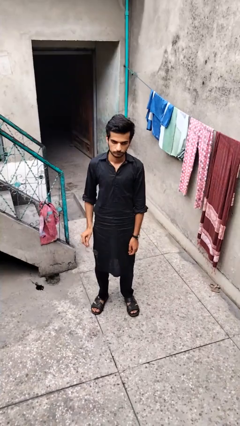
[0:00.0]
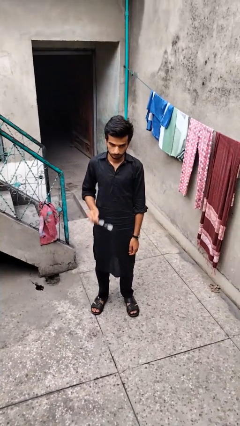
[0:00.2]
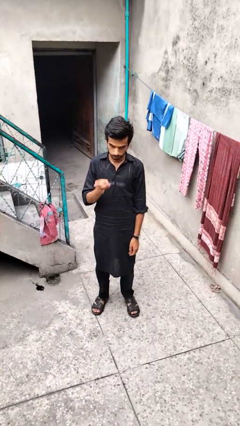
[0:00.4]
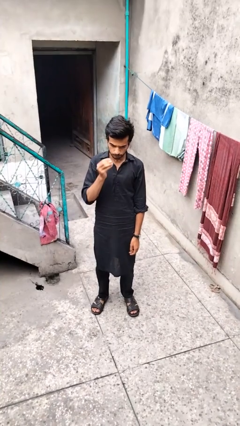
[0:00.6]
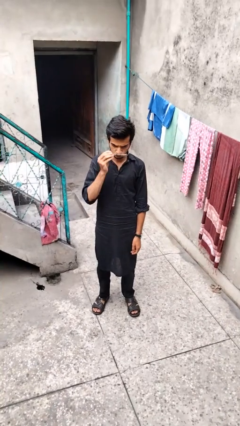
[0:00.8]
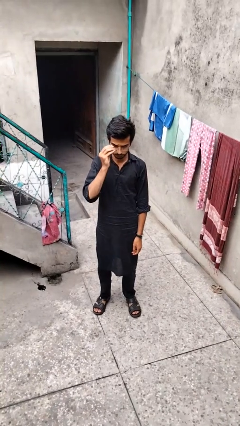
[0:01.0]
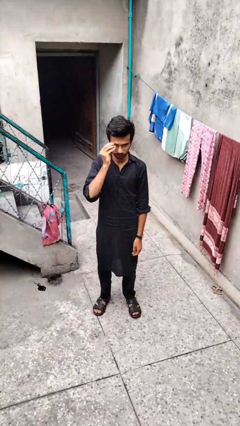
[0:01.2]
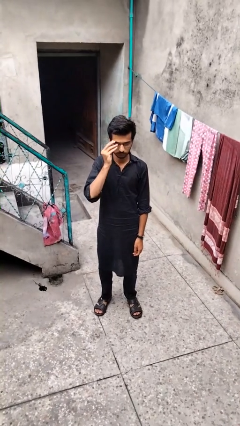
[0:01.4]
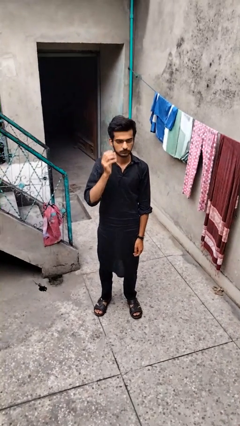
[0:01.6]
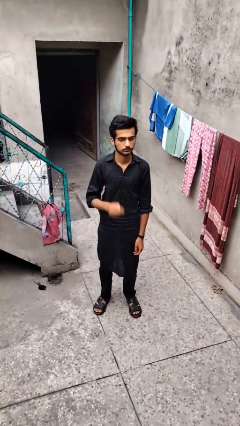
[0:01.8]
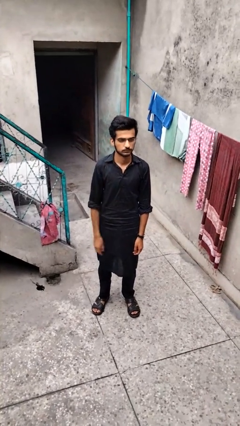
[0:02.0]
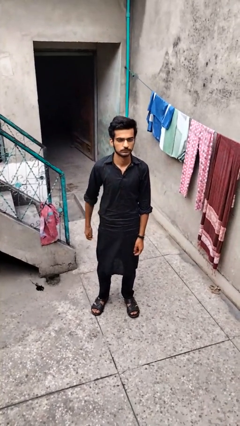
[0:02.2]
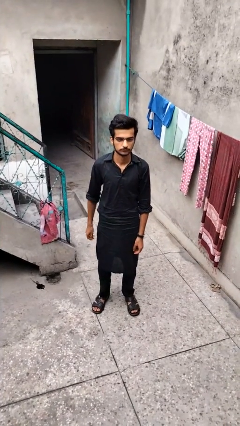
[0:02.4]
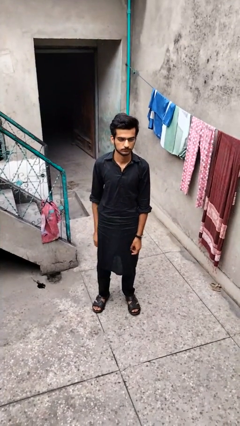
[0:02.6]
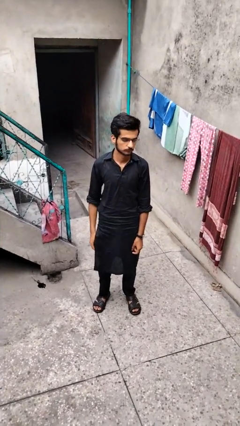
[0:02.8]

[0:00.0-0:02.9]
person puts on glasses

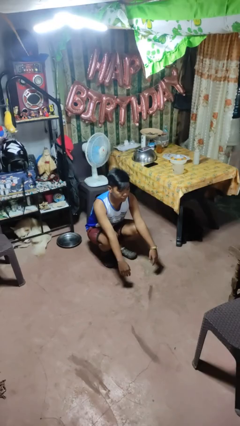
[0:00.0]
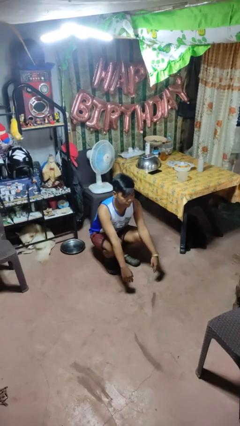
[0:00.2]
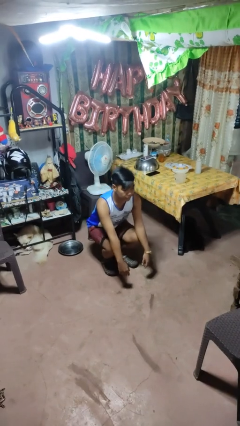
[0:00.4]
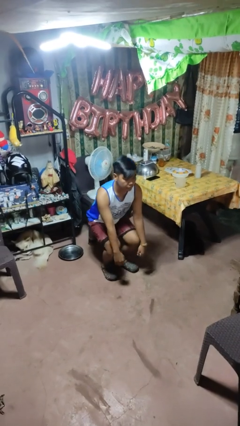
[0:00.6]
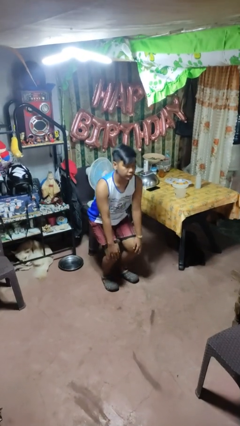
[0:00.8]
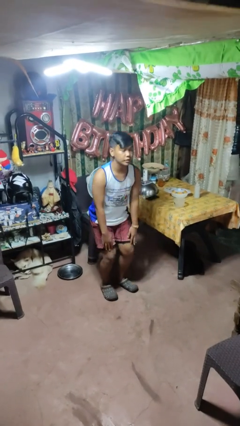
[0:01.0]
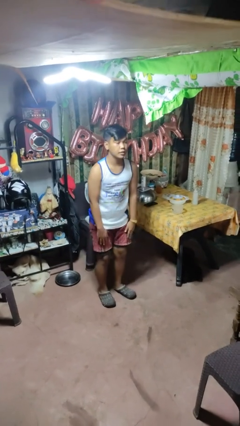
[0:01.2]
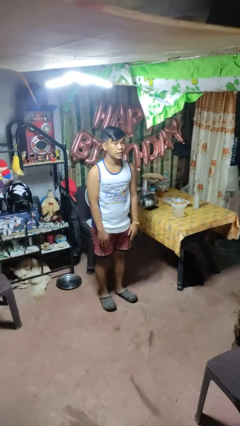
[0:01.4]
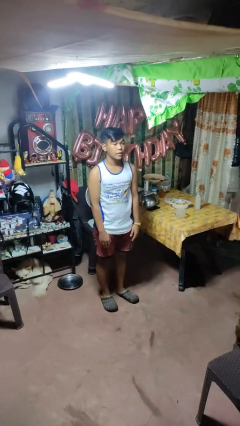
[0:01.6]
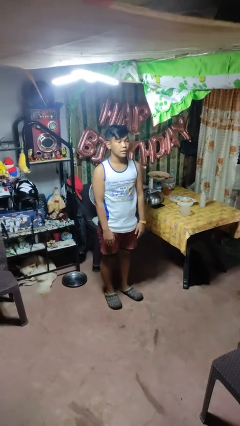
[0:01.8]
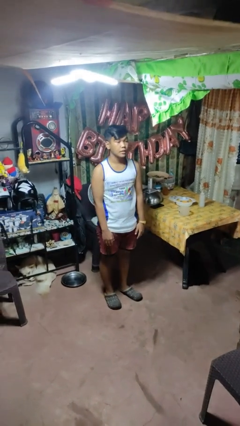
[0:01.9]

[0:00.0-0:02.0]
person stands up

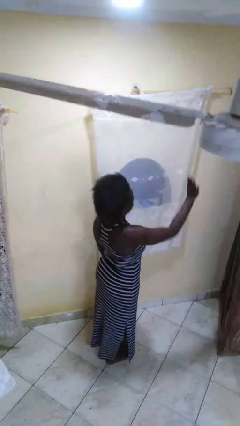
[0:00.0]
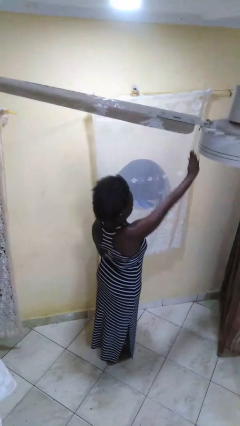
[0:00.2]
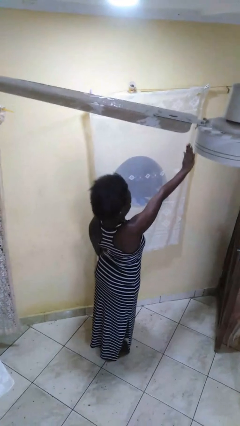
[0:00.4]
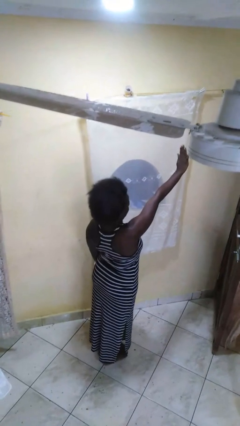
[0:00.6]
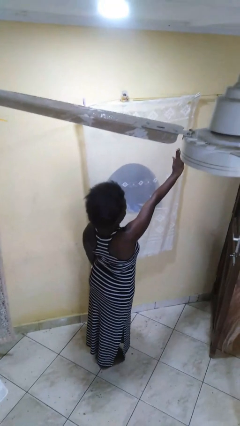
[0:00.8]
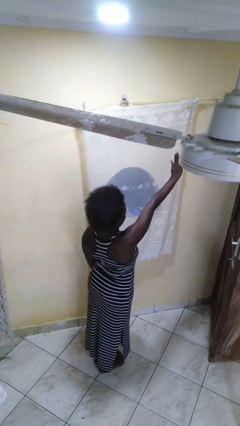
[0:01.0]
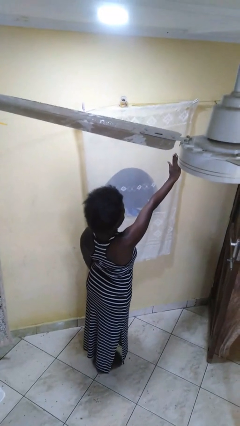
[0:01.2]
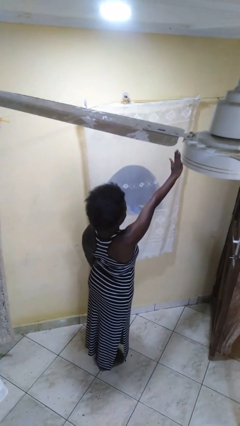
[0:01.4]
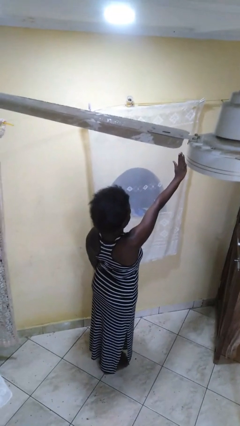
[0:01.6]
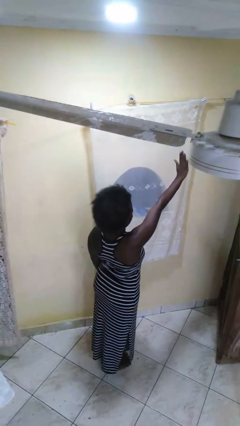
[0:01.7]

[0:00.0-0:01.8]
person gestures stop

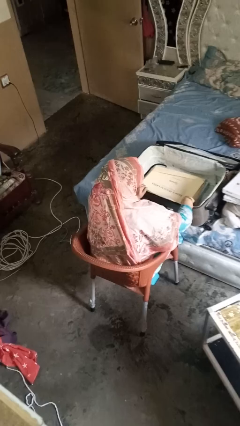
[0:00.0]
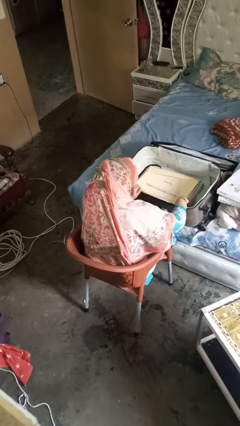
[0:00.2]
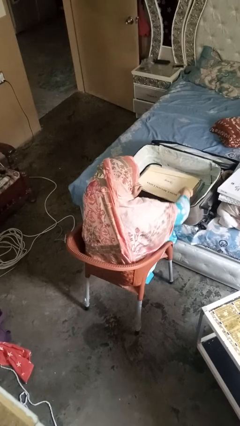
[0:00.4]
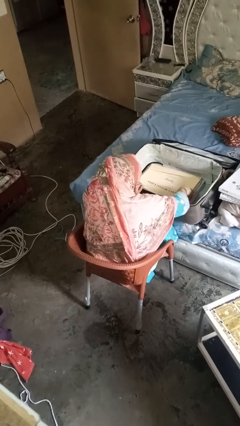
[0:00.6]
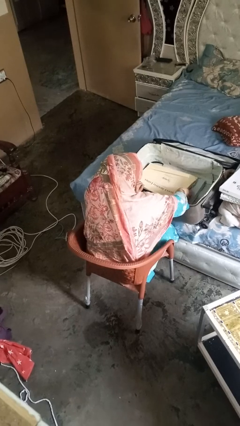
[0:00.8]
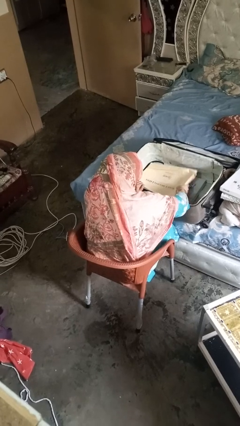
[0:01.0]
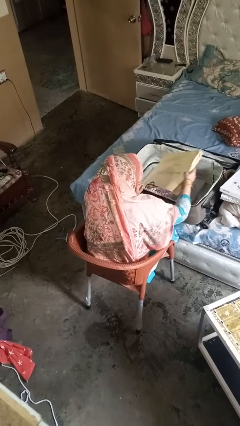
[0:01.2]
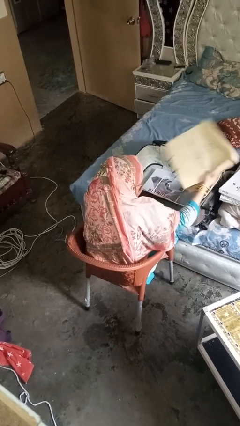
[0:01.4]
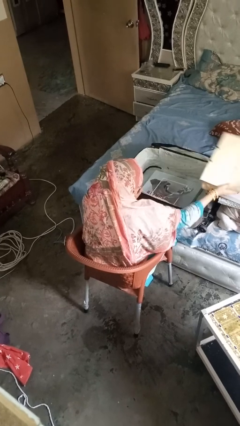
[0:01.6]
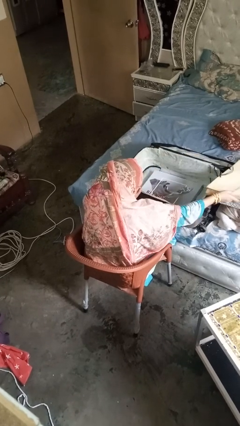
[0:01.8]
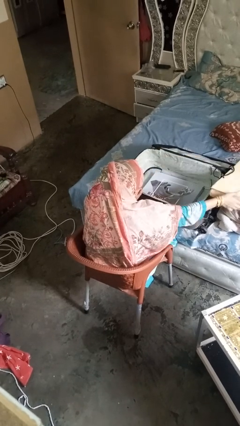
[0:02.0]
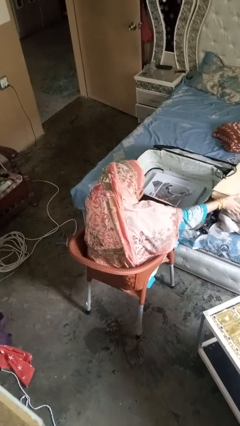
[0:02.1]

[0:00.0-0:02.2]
person unloads clothes from suitcase

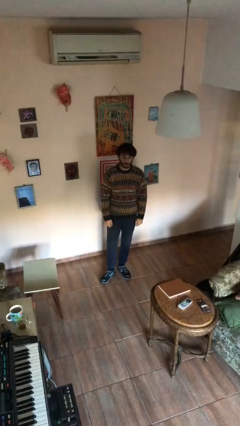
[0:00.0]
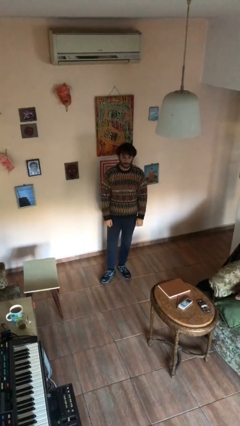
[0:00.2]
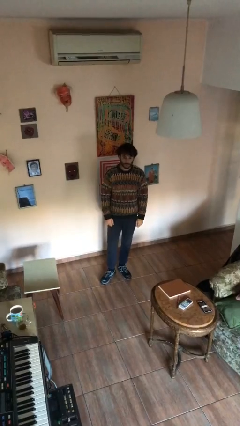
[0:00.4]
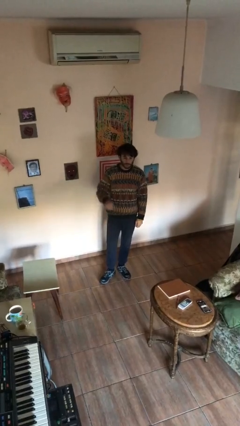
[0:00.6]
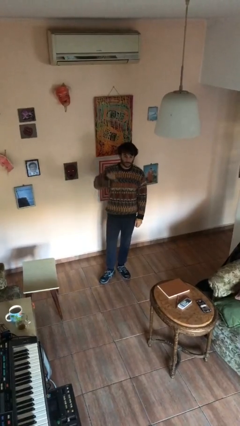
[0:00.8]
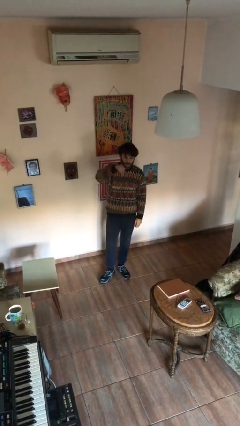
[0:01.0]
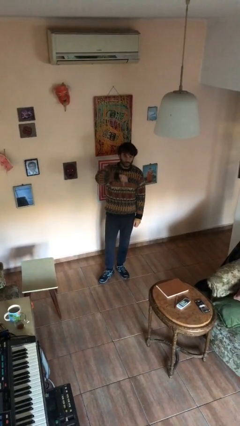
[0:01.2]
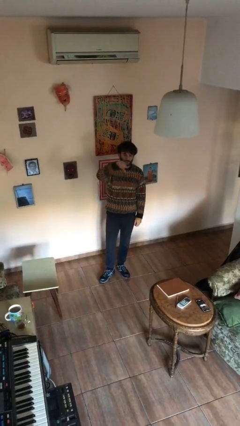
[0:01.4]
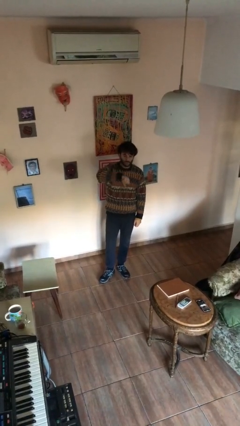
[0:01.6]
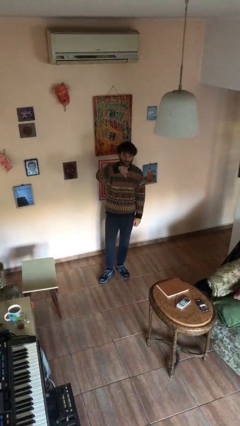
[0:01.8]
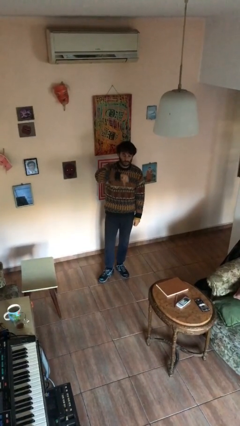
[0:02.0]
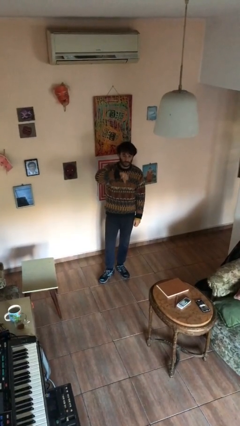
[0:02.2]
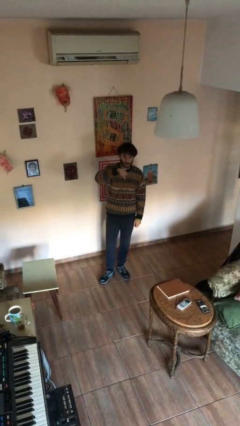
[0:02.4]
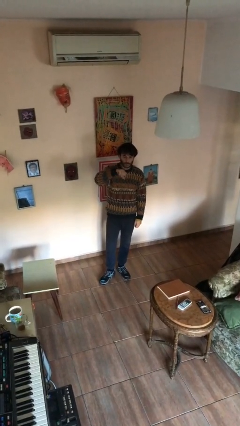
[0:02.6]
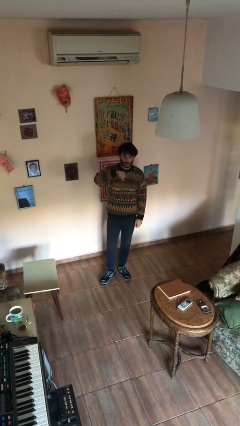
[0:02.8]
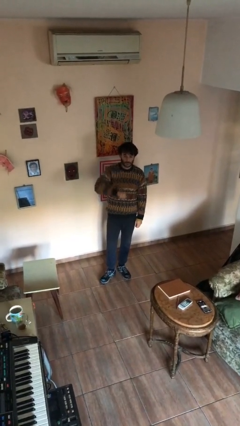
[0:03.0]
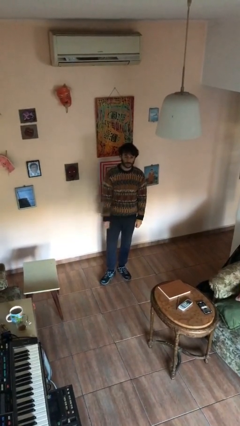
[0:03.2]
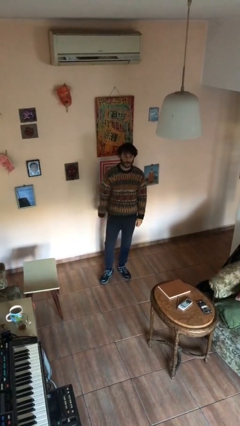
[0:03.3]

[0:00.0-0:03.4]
person gestures thumbs down

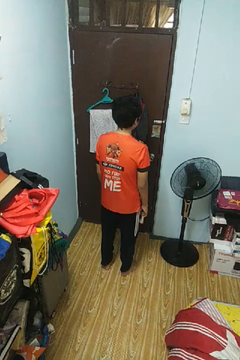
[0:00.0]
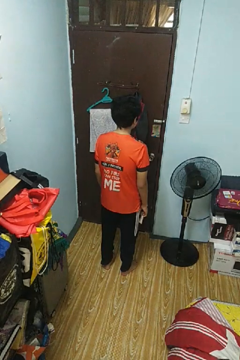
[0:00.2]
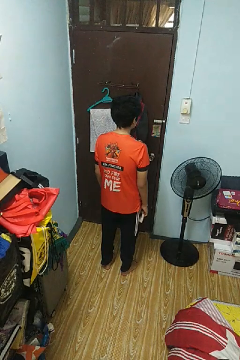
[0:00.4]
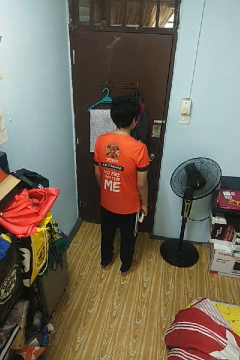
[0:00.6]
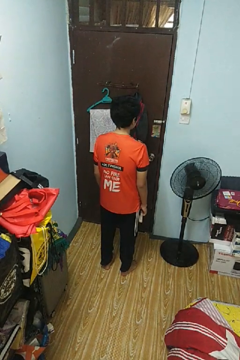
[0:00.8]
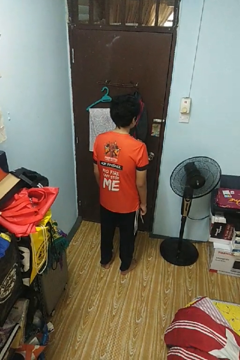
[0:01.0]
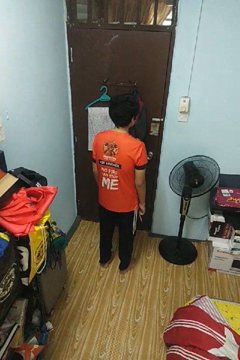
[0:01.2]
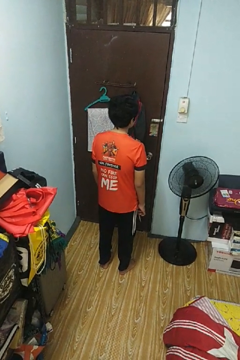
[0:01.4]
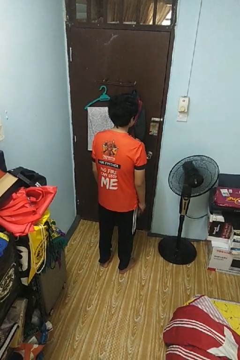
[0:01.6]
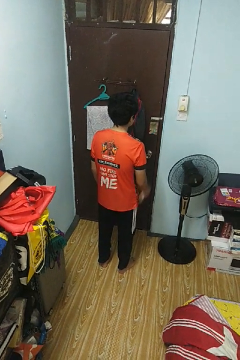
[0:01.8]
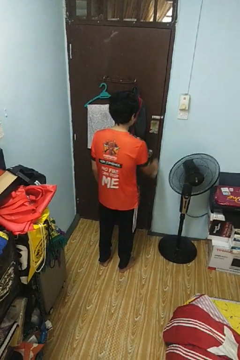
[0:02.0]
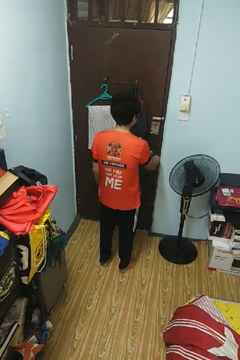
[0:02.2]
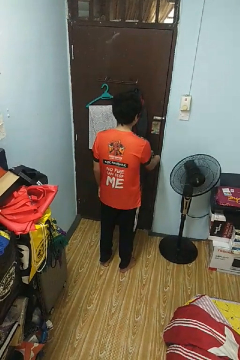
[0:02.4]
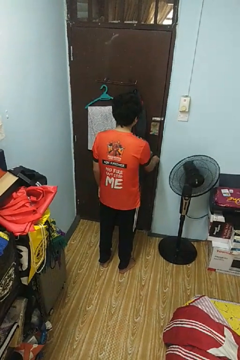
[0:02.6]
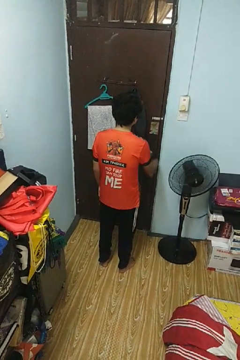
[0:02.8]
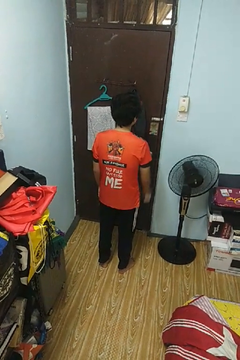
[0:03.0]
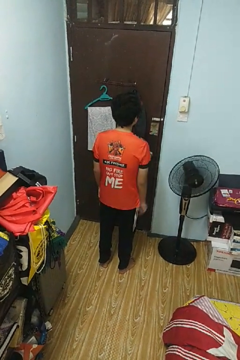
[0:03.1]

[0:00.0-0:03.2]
person unlocks door with keys

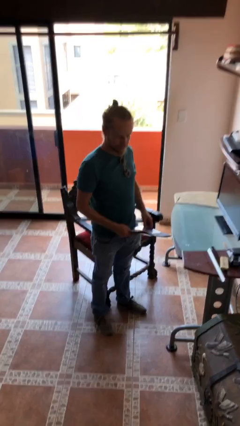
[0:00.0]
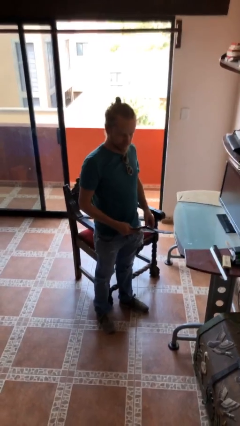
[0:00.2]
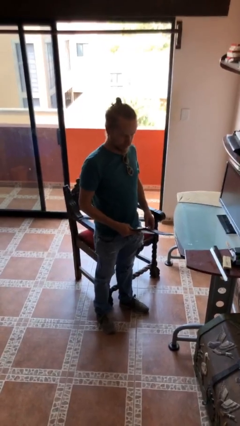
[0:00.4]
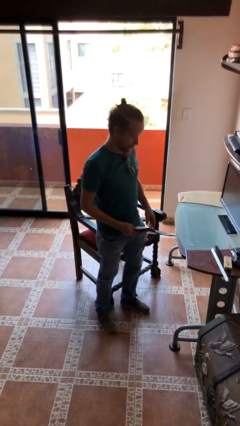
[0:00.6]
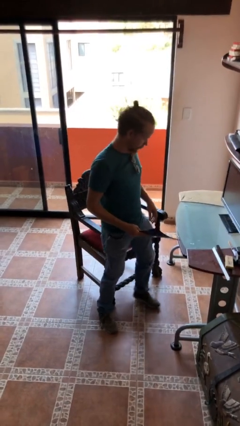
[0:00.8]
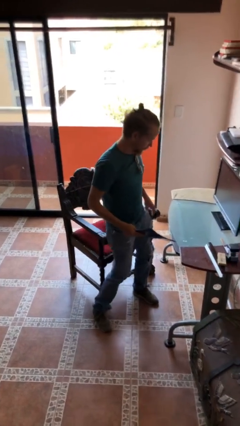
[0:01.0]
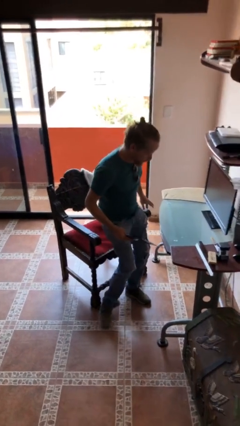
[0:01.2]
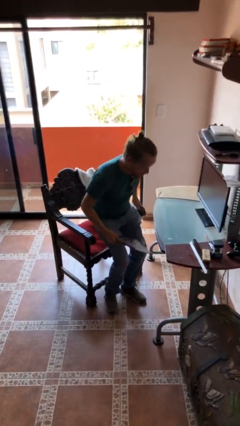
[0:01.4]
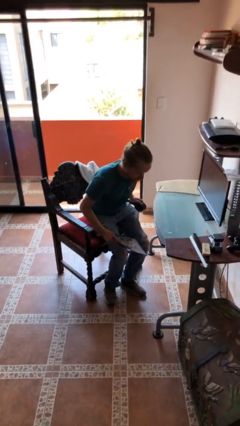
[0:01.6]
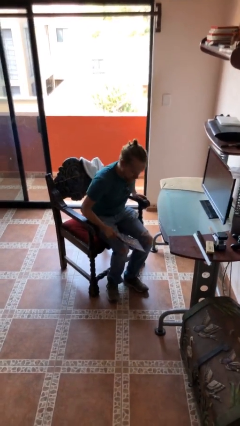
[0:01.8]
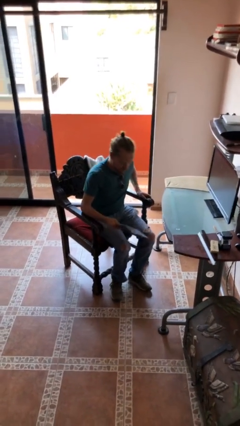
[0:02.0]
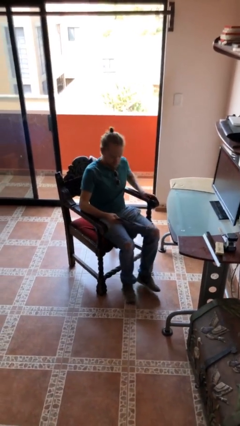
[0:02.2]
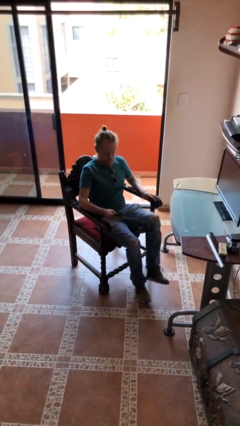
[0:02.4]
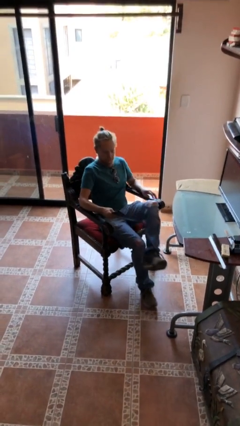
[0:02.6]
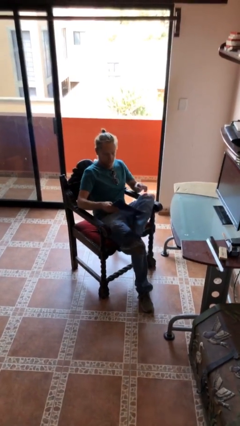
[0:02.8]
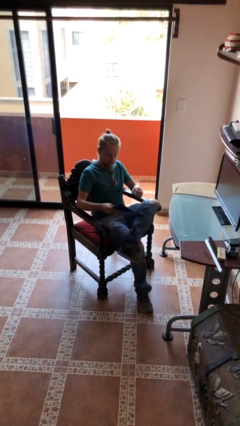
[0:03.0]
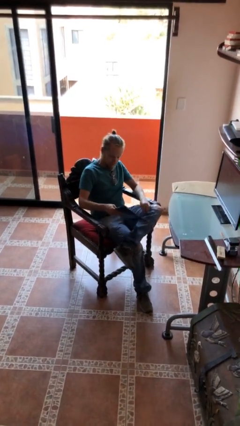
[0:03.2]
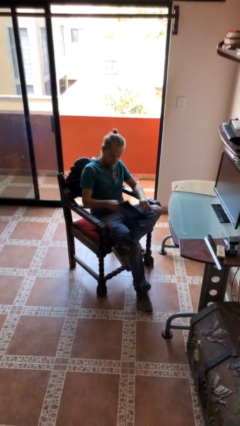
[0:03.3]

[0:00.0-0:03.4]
person sits down
